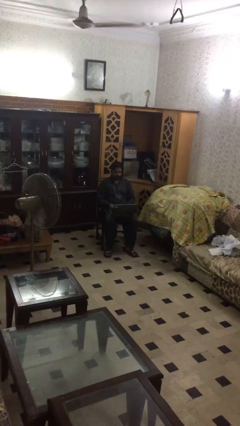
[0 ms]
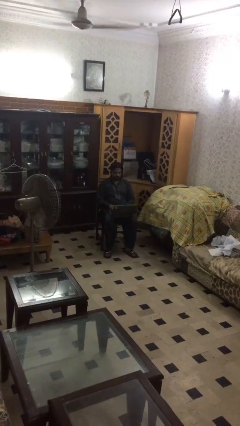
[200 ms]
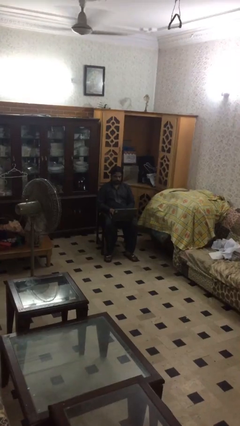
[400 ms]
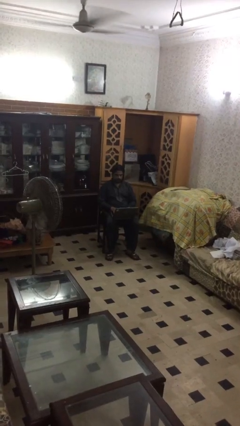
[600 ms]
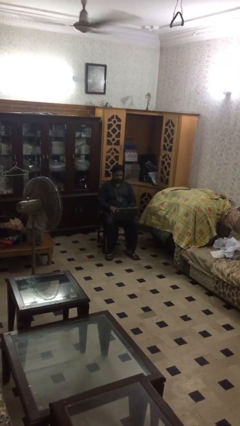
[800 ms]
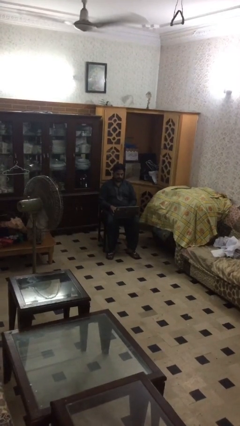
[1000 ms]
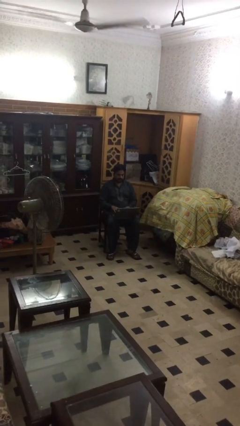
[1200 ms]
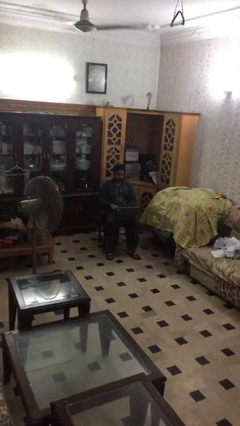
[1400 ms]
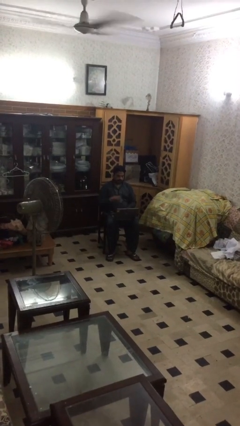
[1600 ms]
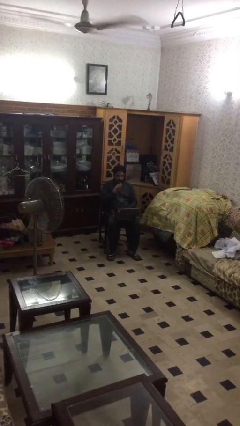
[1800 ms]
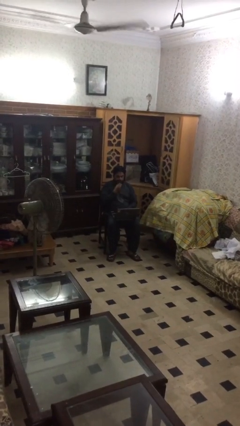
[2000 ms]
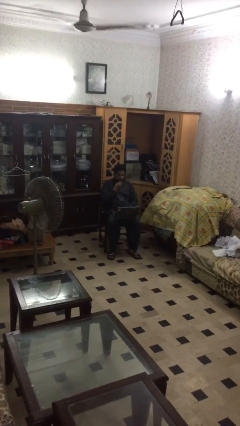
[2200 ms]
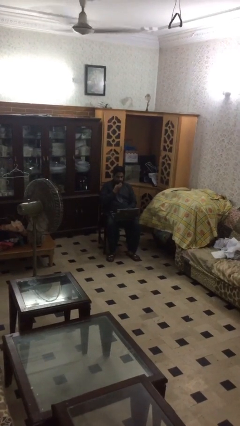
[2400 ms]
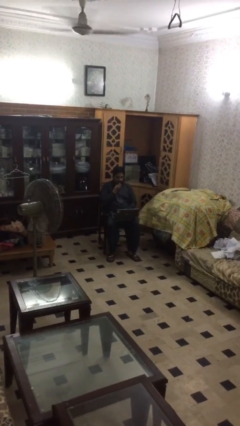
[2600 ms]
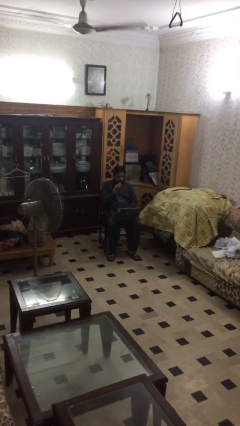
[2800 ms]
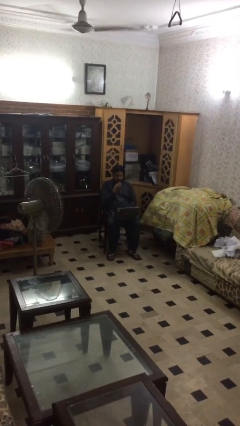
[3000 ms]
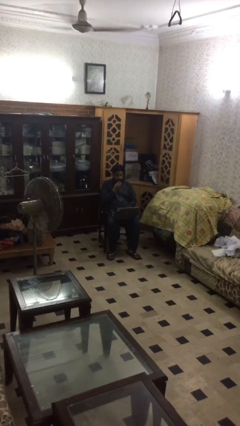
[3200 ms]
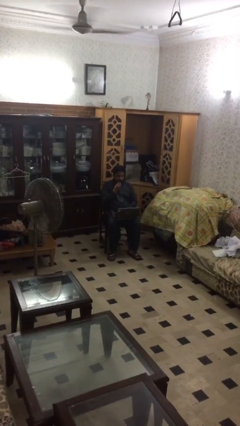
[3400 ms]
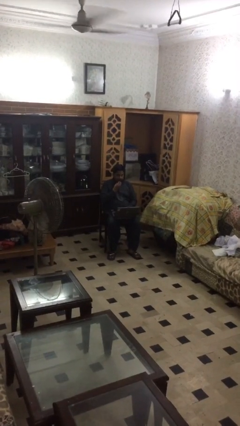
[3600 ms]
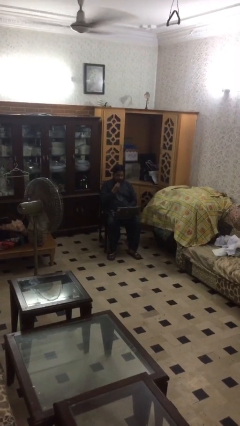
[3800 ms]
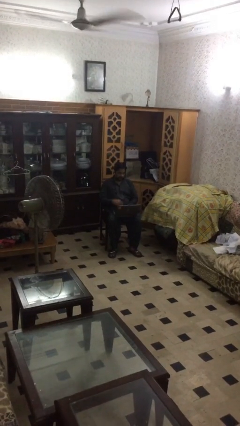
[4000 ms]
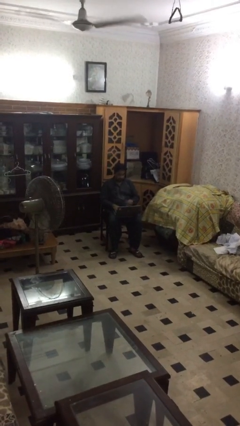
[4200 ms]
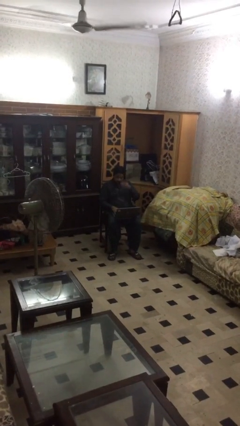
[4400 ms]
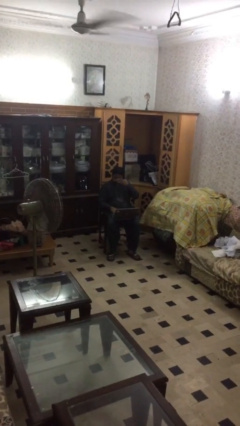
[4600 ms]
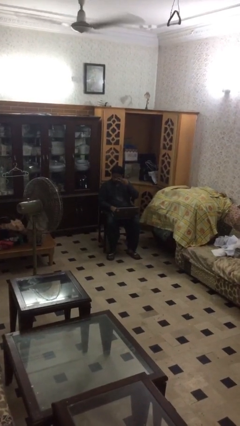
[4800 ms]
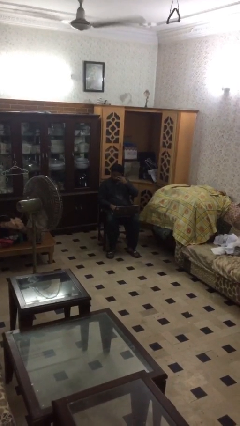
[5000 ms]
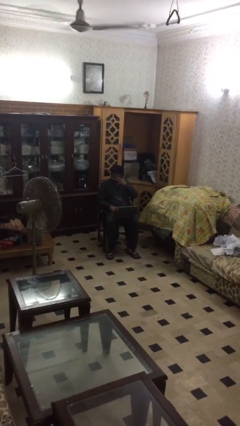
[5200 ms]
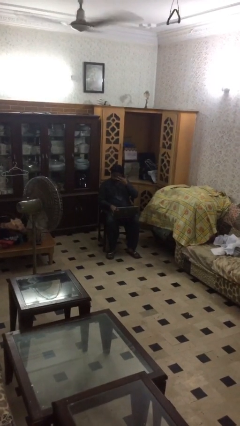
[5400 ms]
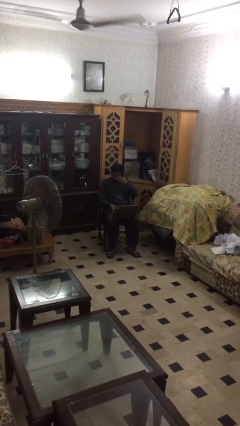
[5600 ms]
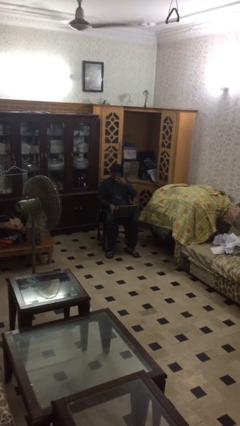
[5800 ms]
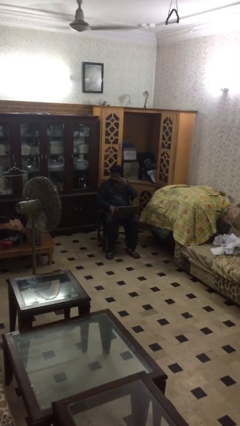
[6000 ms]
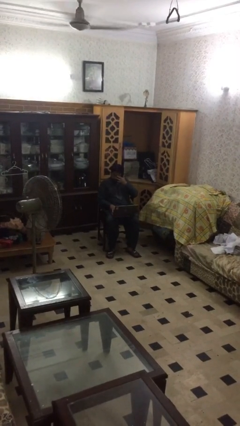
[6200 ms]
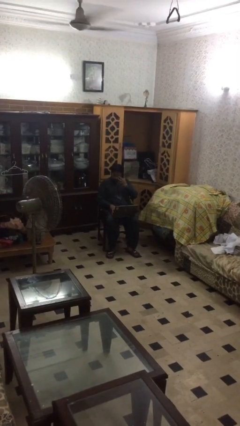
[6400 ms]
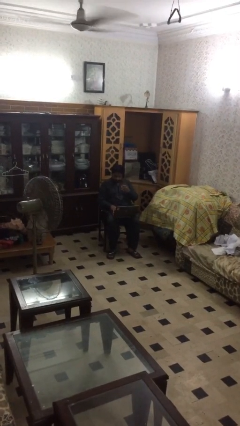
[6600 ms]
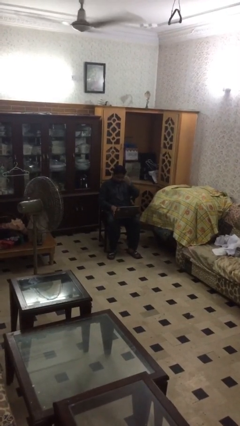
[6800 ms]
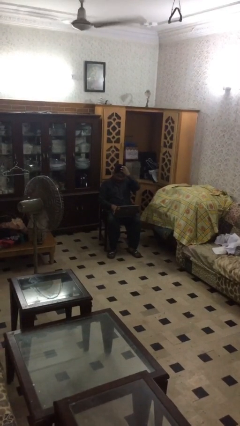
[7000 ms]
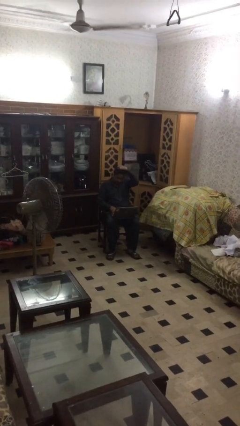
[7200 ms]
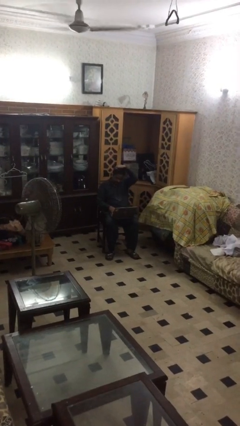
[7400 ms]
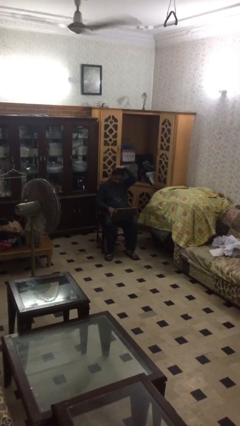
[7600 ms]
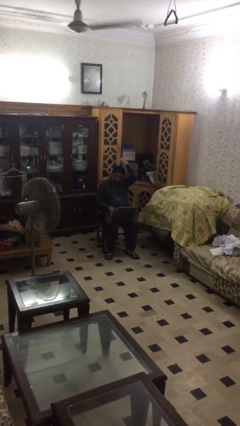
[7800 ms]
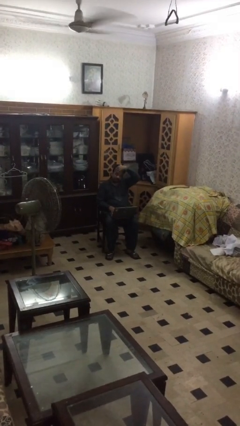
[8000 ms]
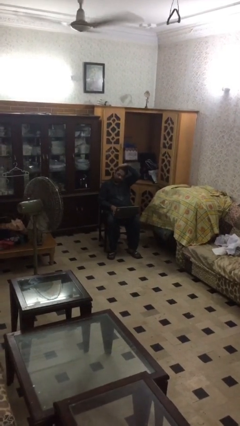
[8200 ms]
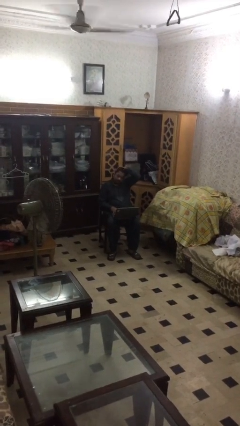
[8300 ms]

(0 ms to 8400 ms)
person interacts with laptop

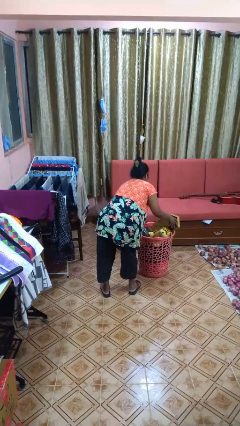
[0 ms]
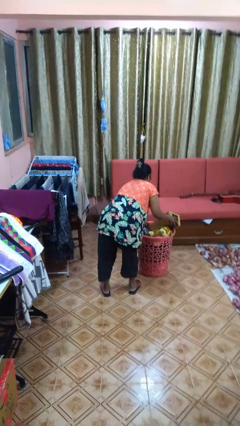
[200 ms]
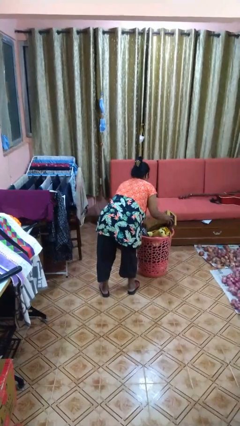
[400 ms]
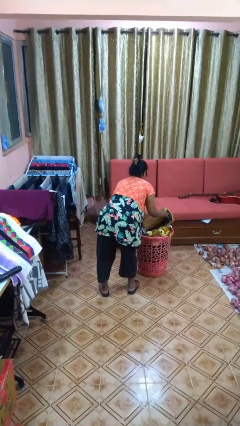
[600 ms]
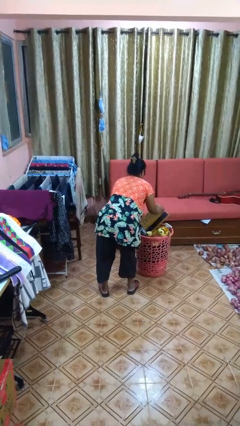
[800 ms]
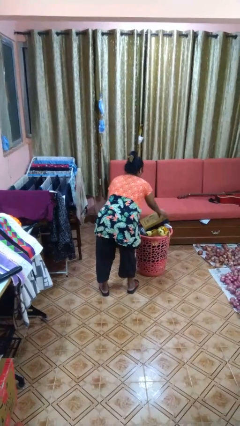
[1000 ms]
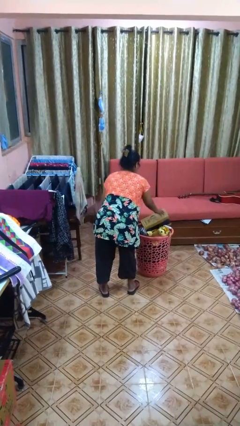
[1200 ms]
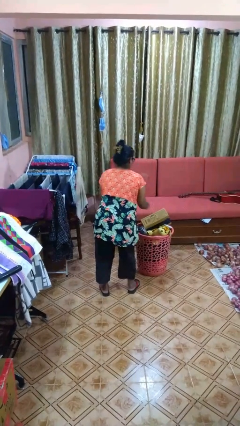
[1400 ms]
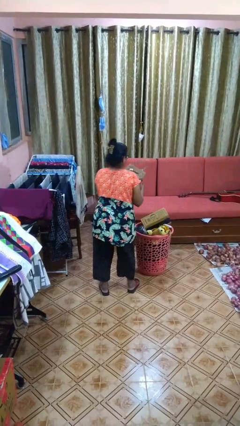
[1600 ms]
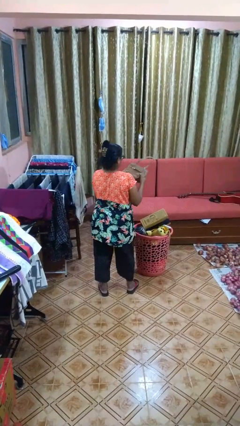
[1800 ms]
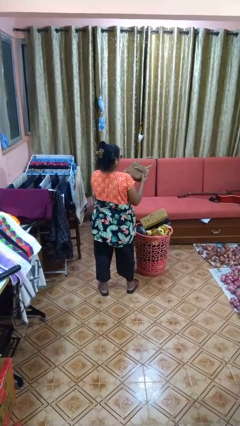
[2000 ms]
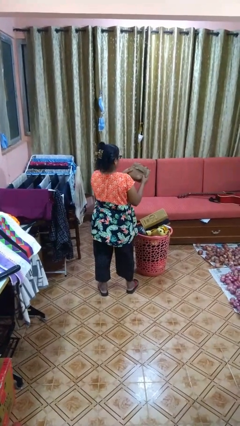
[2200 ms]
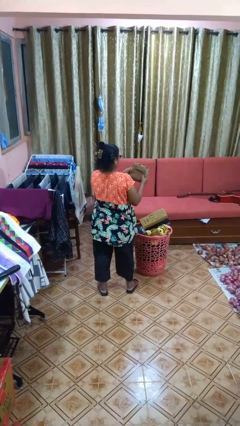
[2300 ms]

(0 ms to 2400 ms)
person takes object from basket

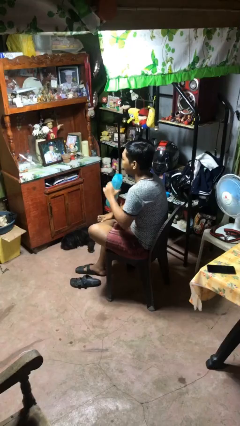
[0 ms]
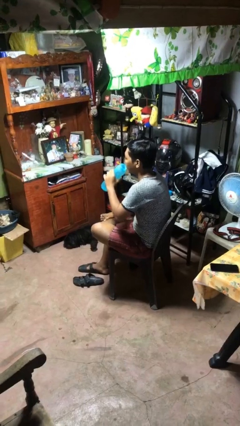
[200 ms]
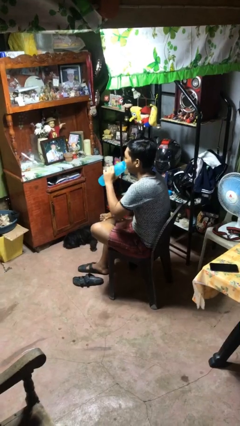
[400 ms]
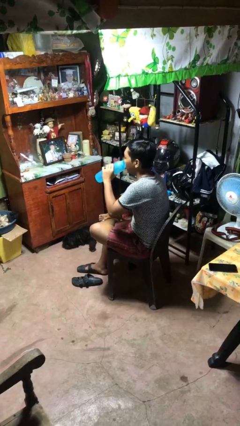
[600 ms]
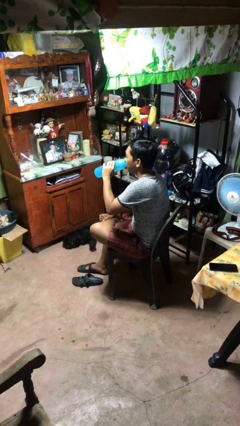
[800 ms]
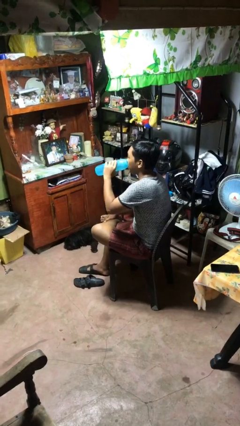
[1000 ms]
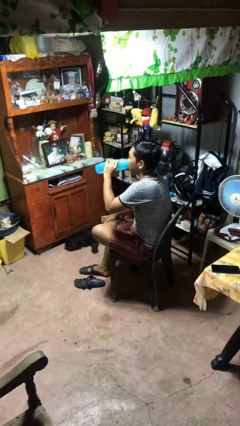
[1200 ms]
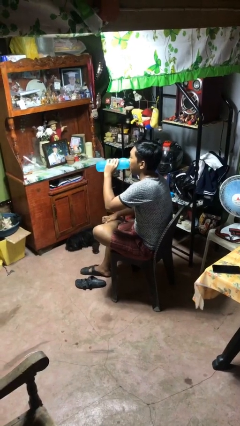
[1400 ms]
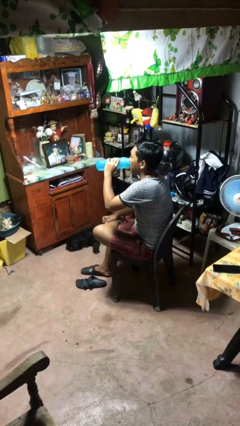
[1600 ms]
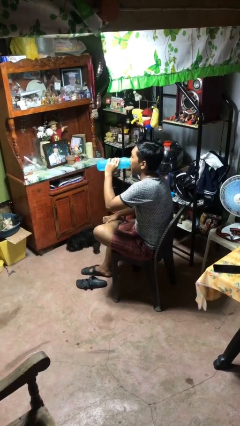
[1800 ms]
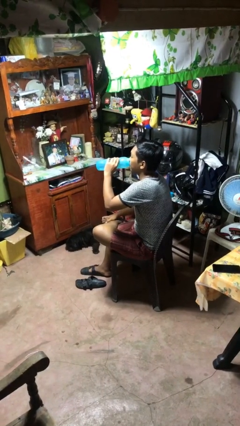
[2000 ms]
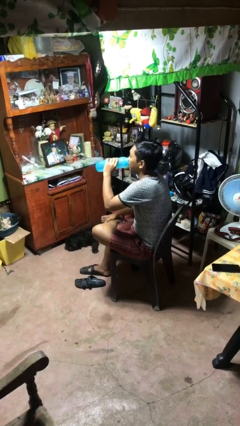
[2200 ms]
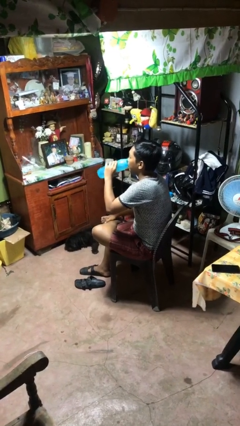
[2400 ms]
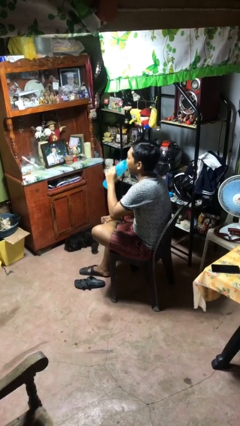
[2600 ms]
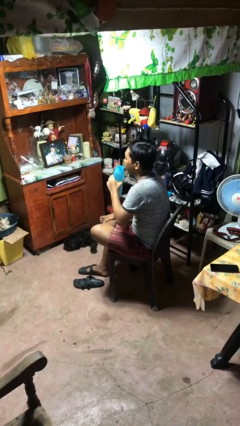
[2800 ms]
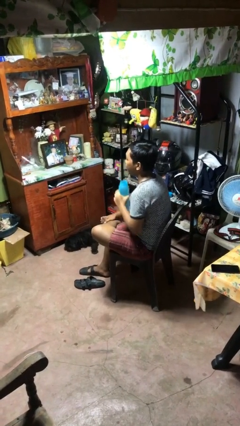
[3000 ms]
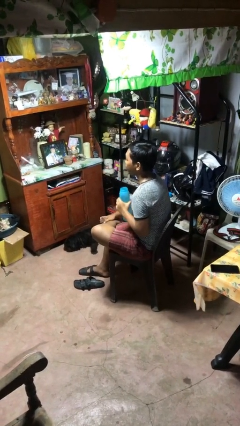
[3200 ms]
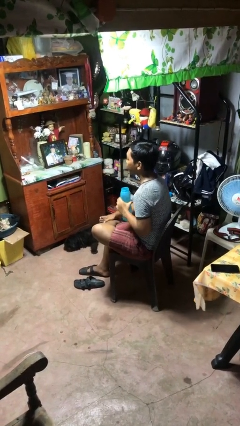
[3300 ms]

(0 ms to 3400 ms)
person drinks from bottle

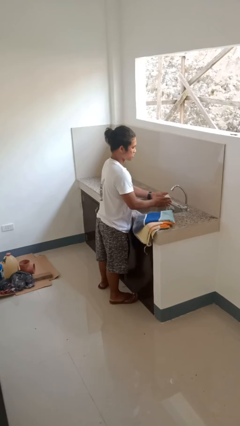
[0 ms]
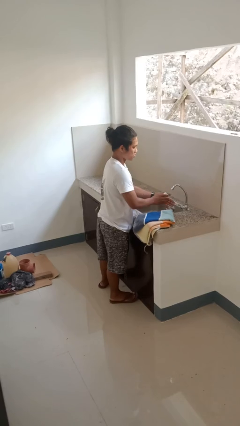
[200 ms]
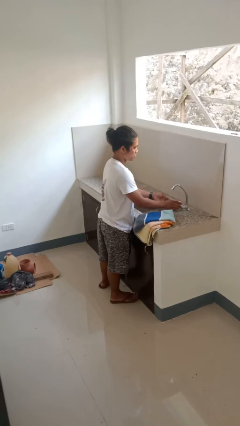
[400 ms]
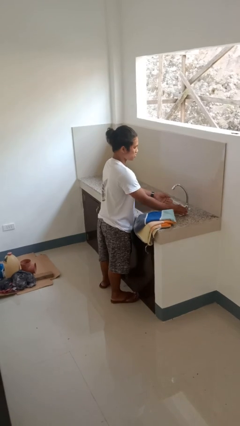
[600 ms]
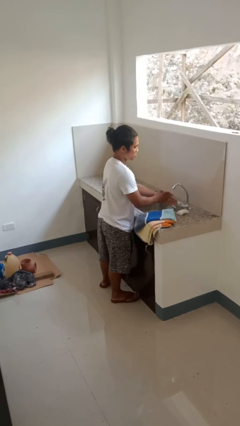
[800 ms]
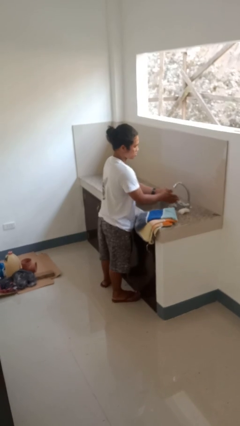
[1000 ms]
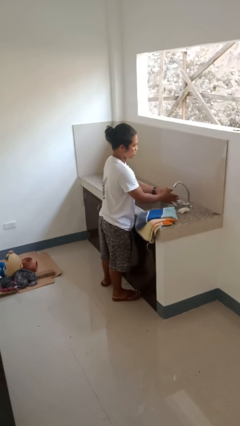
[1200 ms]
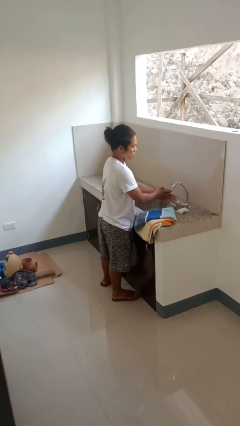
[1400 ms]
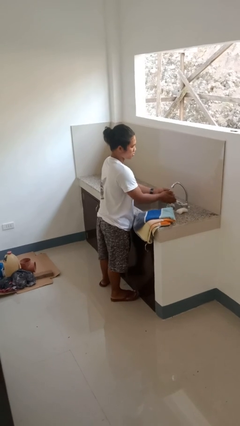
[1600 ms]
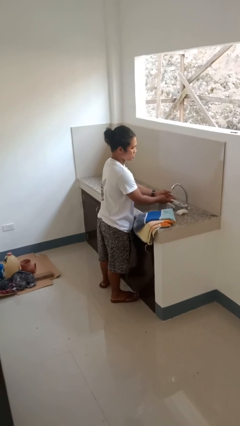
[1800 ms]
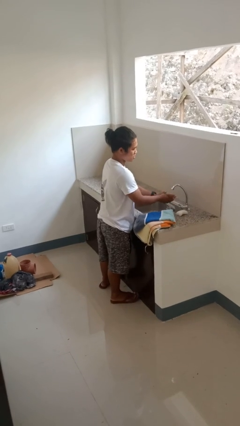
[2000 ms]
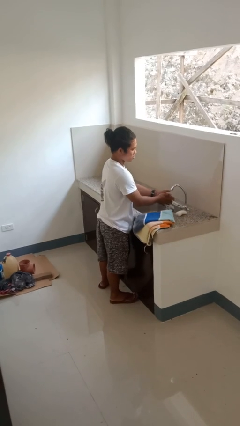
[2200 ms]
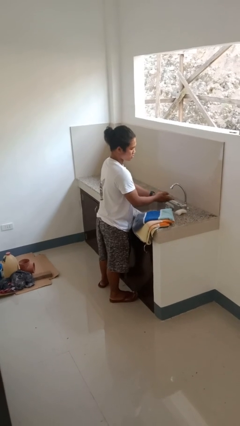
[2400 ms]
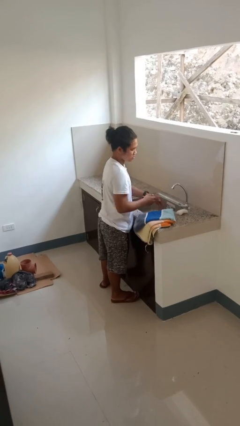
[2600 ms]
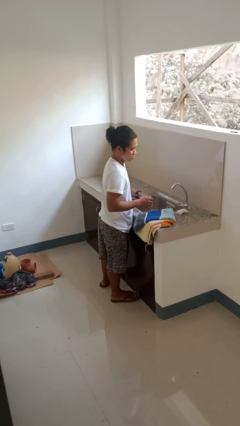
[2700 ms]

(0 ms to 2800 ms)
person washes hands

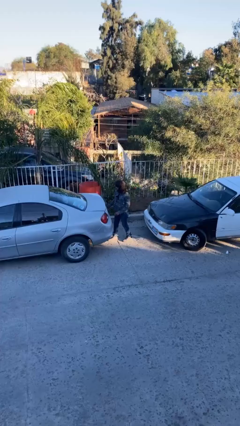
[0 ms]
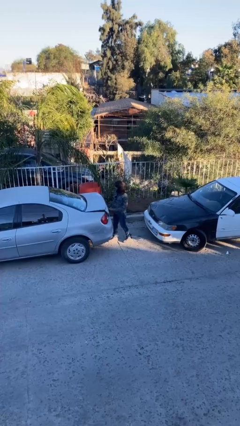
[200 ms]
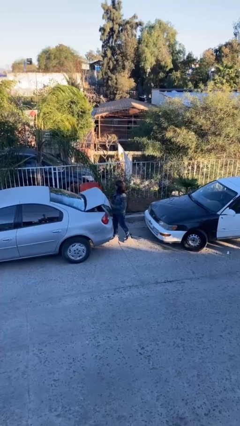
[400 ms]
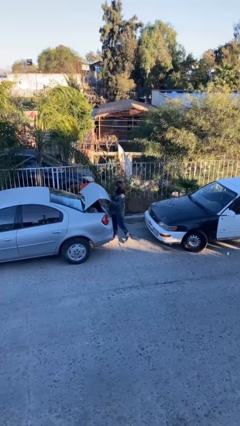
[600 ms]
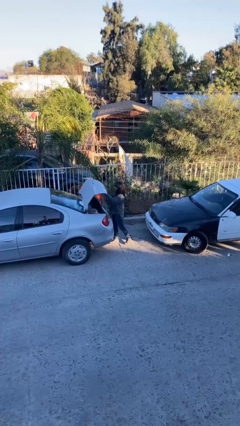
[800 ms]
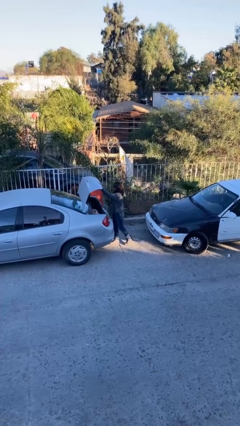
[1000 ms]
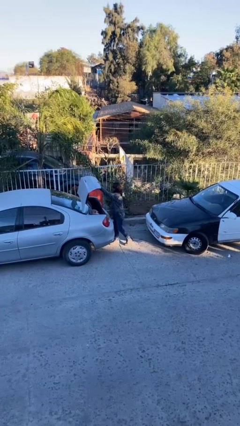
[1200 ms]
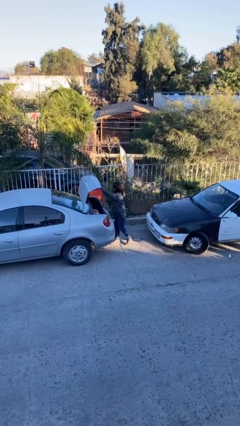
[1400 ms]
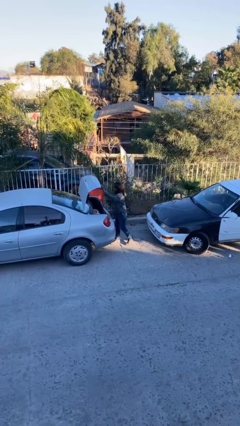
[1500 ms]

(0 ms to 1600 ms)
person opens car trunk
